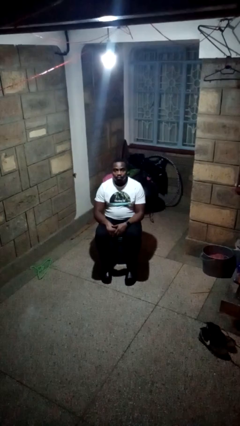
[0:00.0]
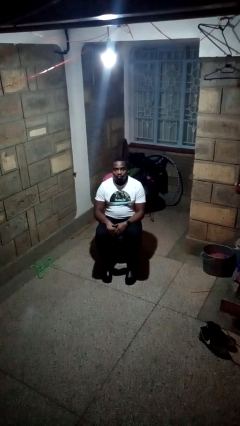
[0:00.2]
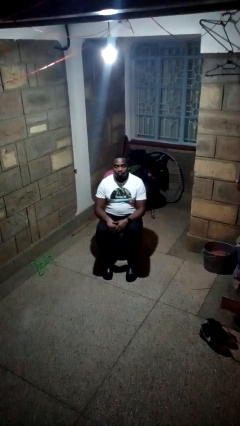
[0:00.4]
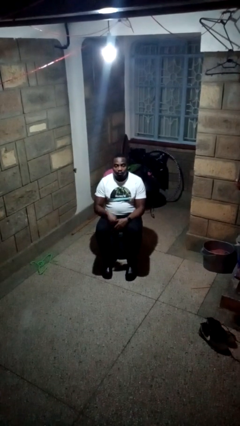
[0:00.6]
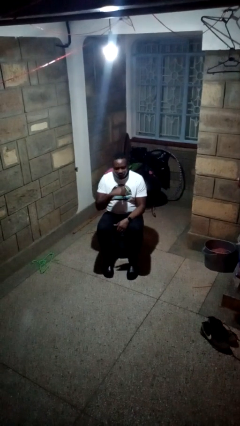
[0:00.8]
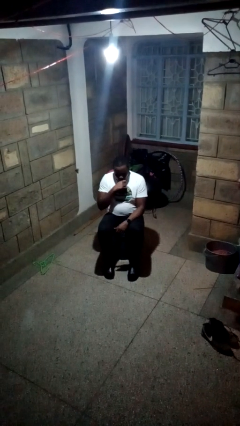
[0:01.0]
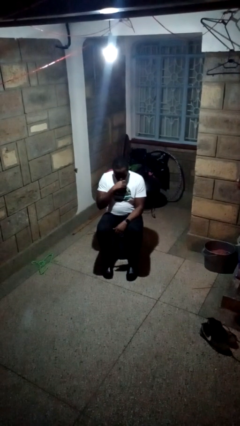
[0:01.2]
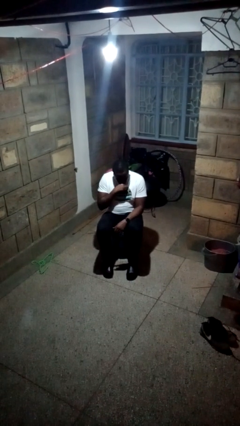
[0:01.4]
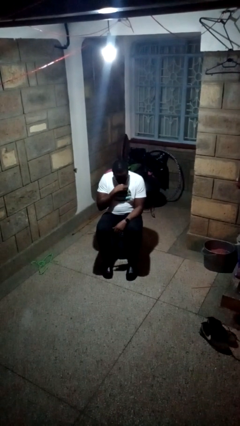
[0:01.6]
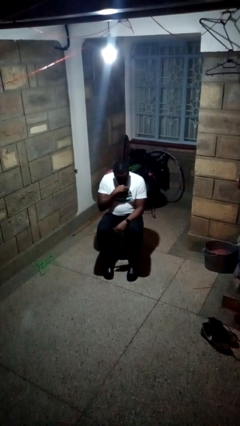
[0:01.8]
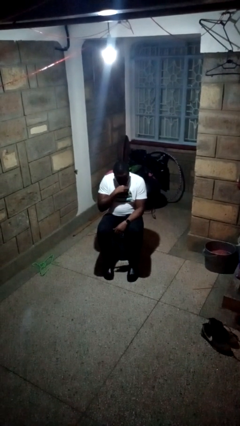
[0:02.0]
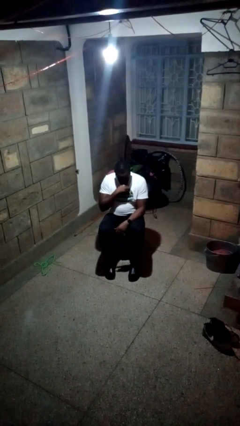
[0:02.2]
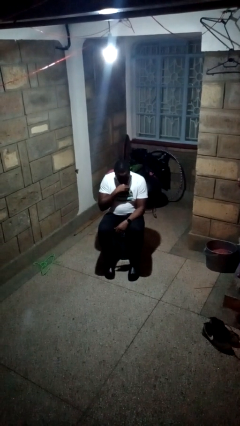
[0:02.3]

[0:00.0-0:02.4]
person sneezes into hand

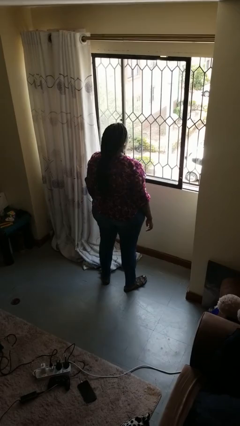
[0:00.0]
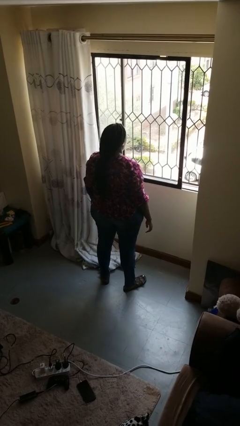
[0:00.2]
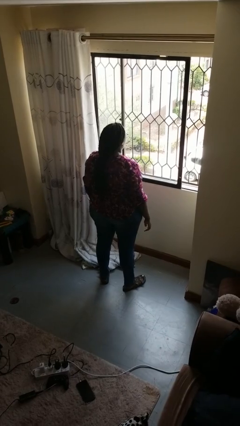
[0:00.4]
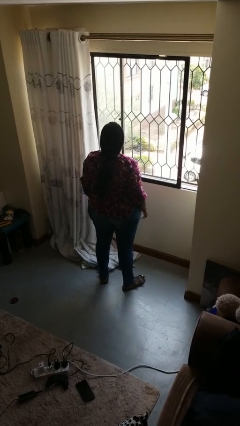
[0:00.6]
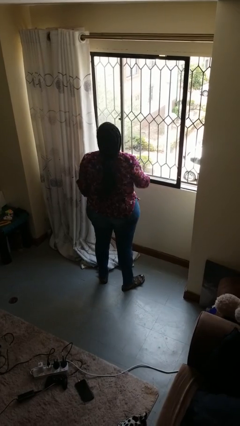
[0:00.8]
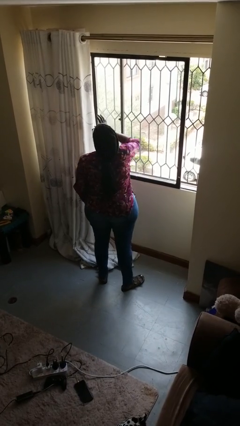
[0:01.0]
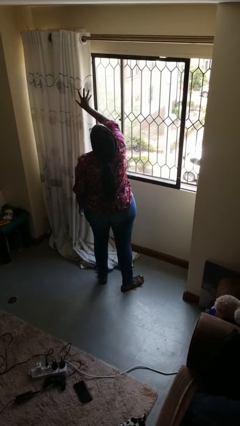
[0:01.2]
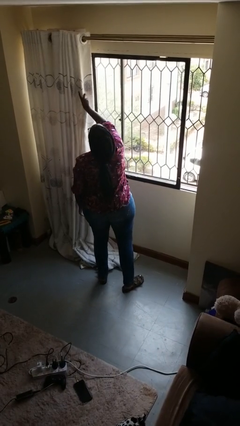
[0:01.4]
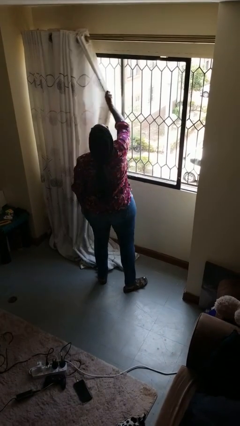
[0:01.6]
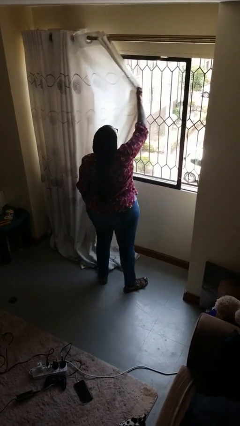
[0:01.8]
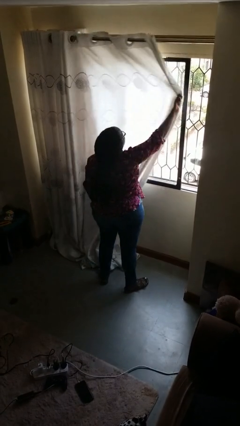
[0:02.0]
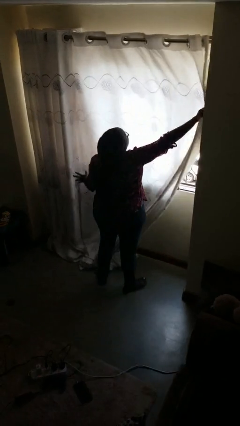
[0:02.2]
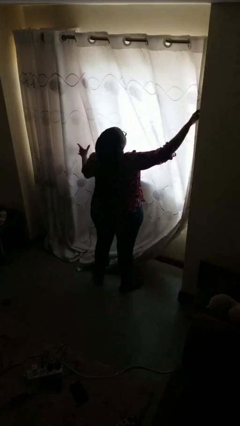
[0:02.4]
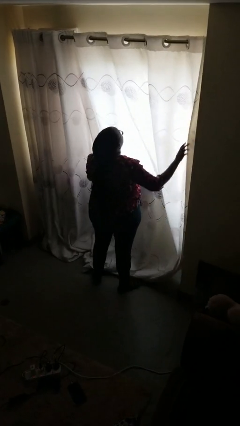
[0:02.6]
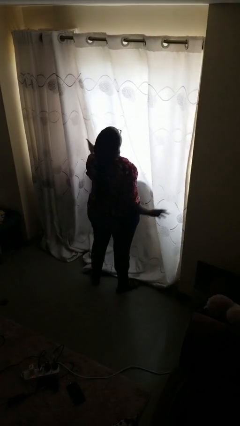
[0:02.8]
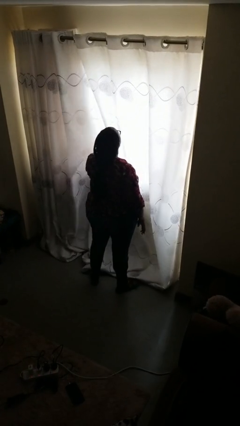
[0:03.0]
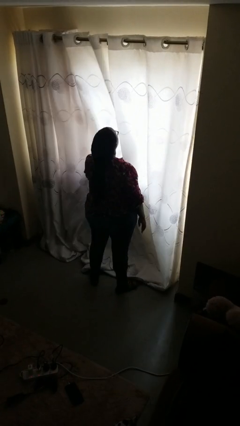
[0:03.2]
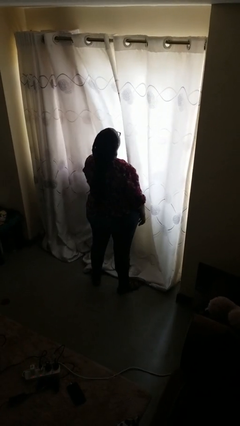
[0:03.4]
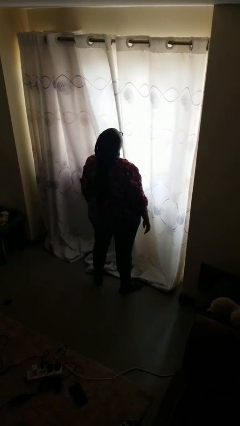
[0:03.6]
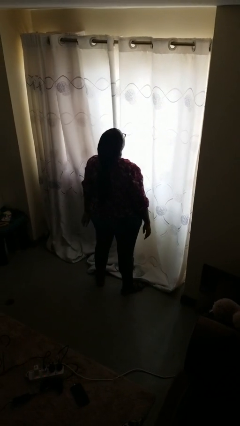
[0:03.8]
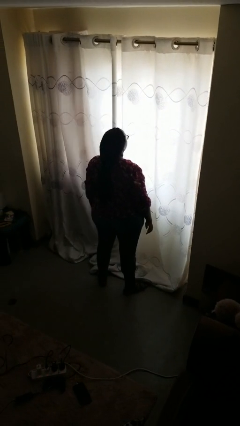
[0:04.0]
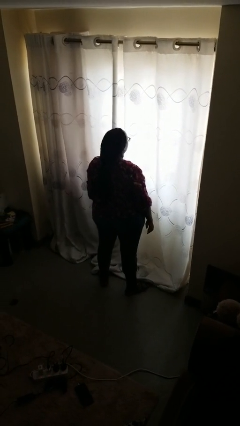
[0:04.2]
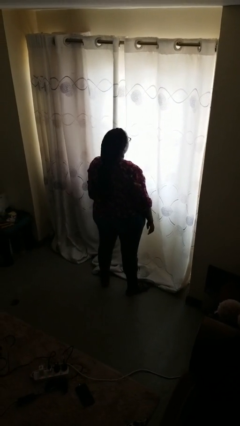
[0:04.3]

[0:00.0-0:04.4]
person closes curtains

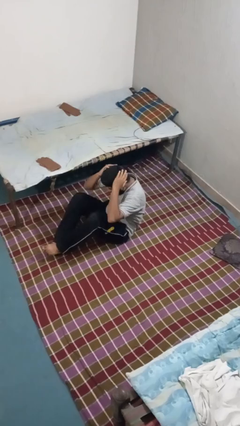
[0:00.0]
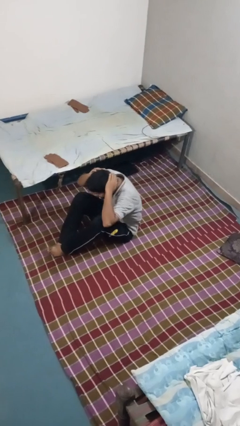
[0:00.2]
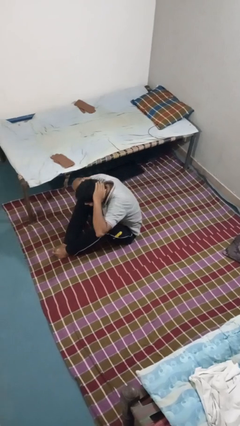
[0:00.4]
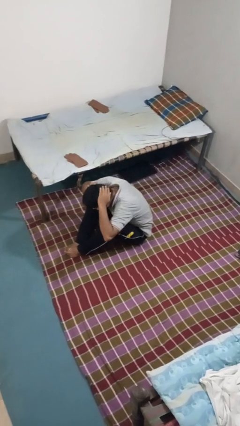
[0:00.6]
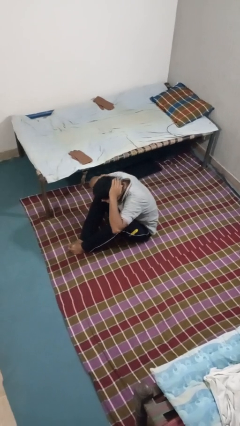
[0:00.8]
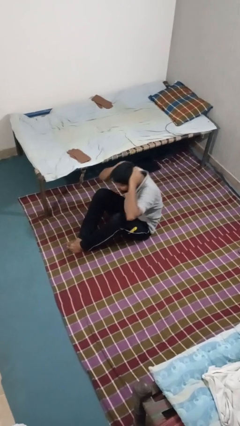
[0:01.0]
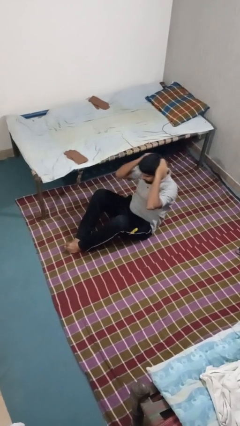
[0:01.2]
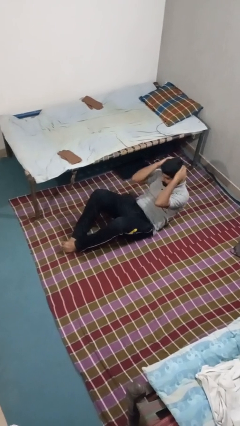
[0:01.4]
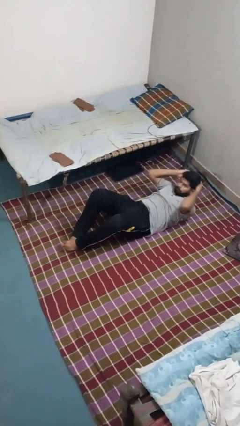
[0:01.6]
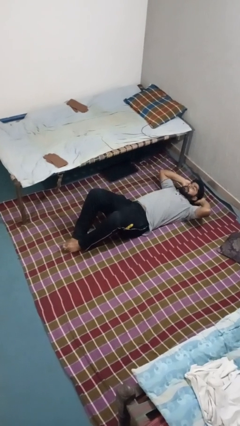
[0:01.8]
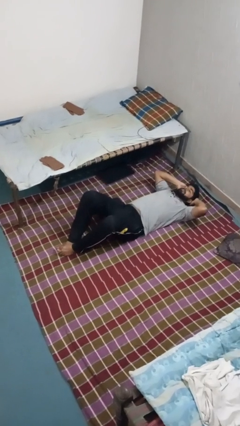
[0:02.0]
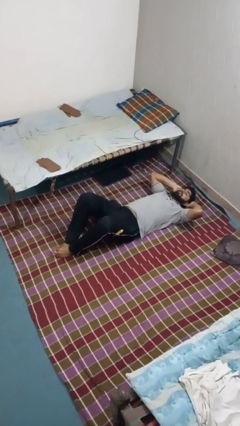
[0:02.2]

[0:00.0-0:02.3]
person exercises with situp

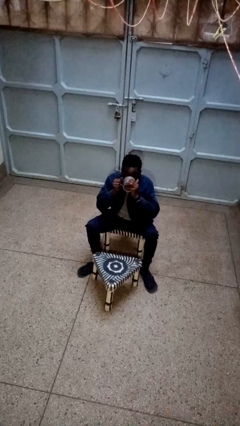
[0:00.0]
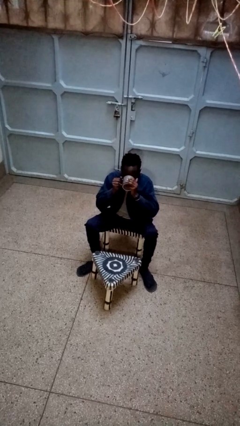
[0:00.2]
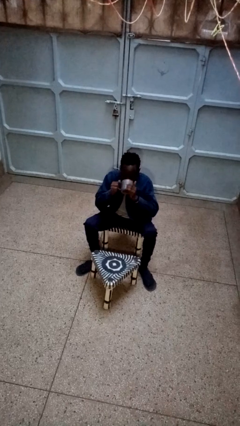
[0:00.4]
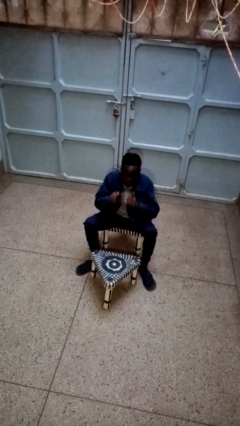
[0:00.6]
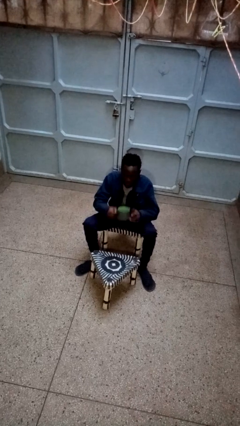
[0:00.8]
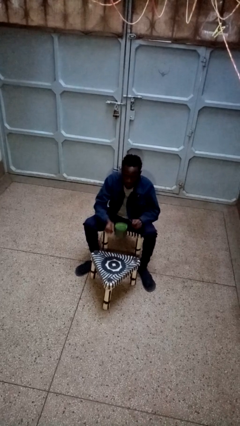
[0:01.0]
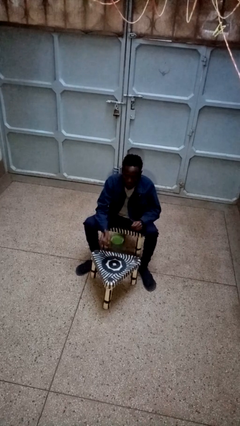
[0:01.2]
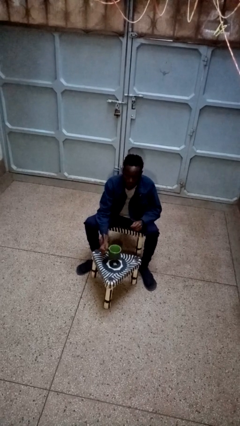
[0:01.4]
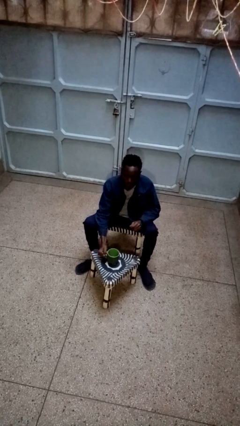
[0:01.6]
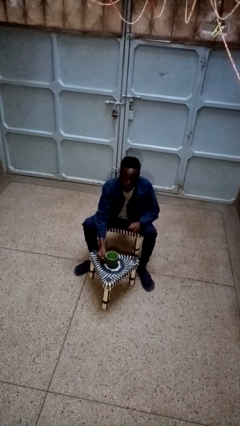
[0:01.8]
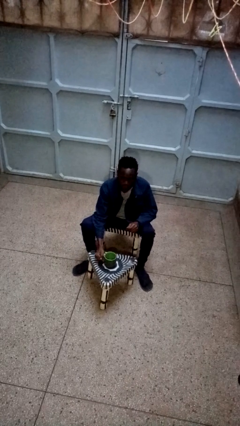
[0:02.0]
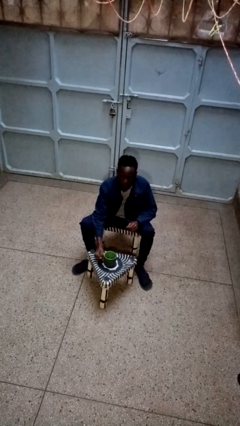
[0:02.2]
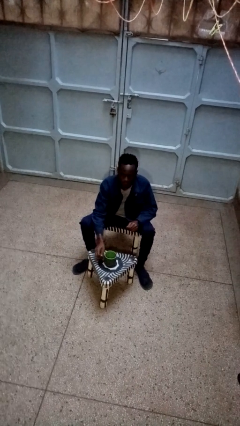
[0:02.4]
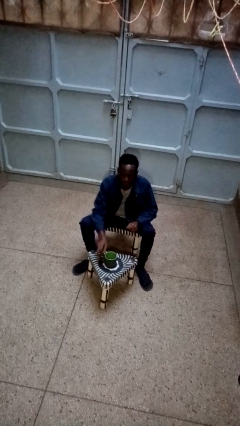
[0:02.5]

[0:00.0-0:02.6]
person puts down object on table

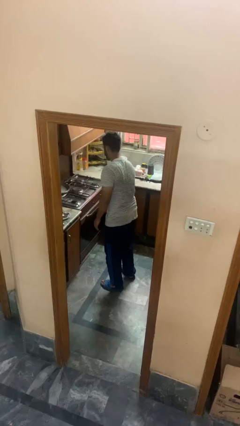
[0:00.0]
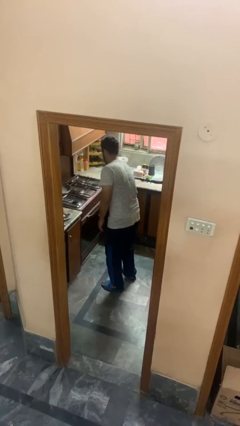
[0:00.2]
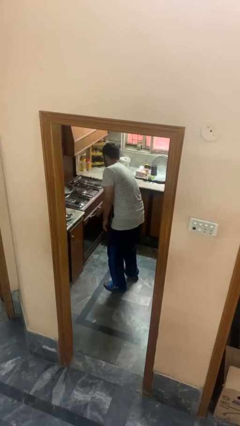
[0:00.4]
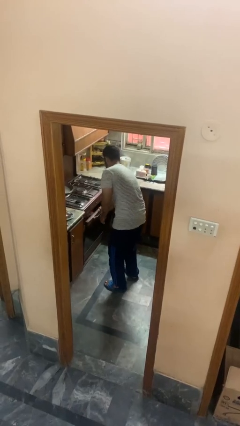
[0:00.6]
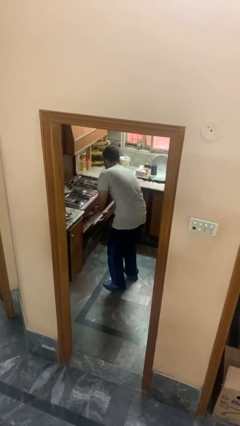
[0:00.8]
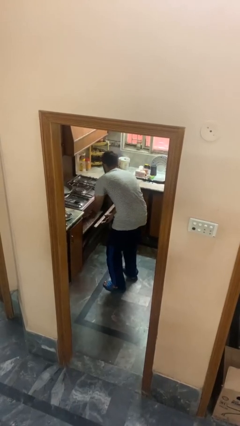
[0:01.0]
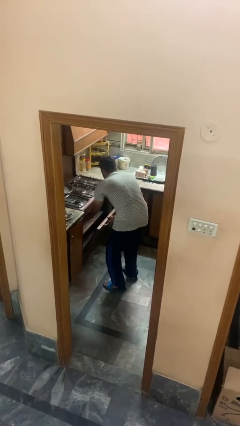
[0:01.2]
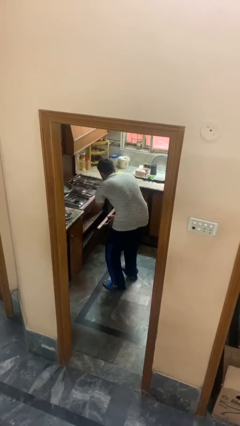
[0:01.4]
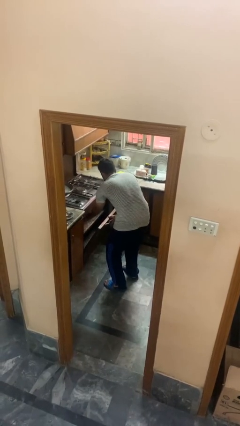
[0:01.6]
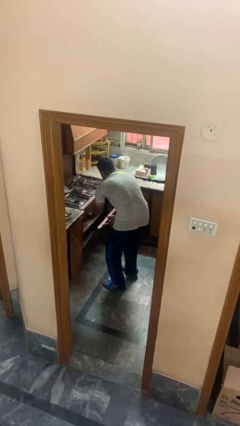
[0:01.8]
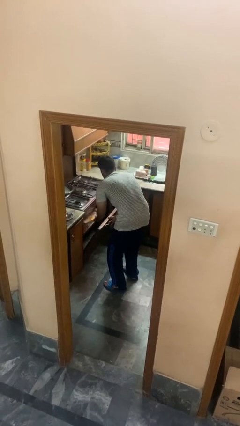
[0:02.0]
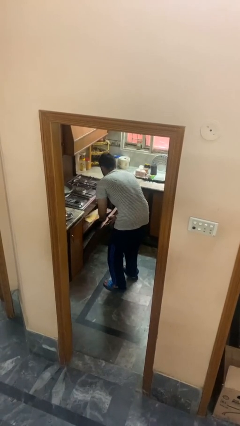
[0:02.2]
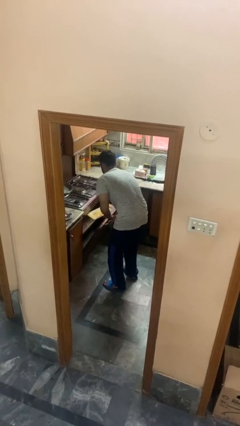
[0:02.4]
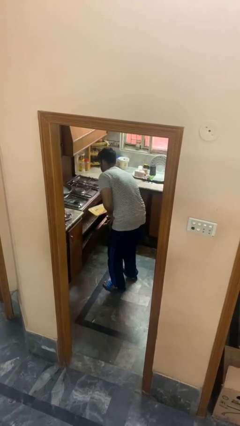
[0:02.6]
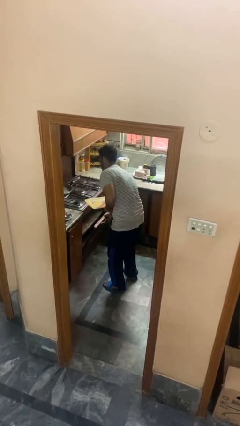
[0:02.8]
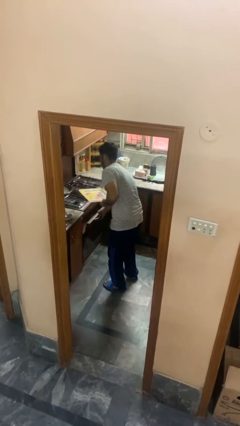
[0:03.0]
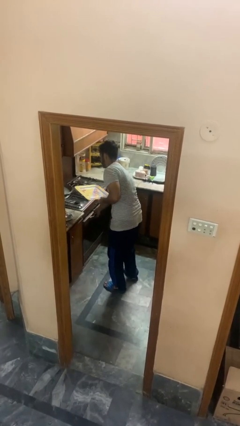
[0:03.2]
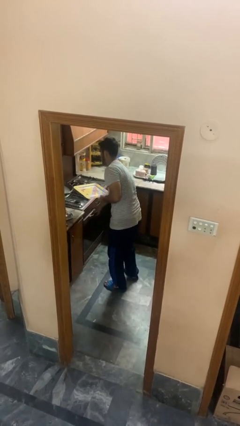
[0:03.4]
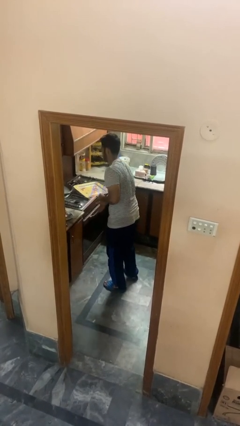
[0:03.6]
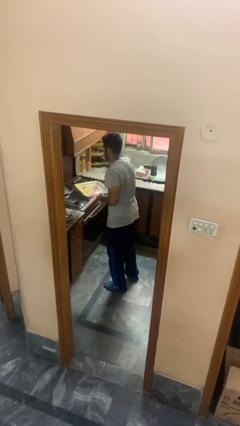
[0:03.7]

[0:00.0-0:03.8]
person takes object from oven

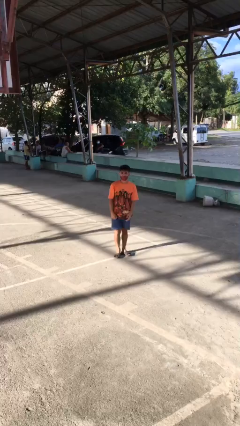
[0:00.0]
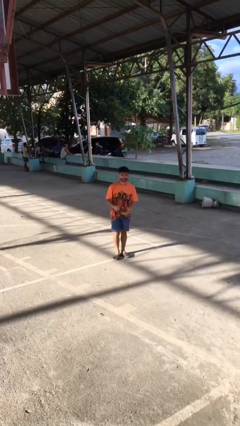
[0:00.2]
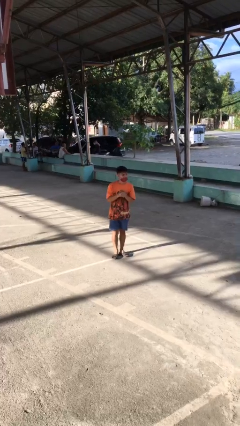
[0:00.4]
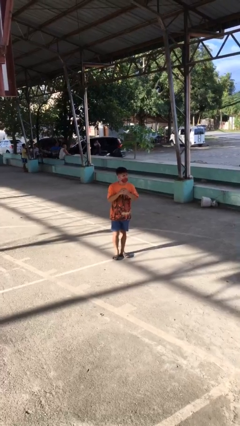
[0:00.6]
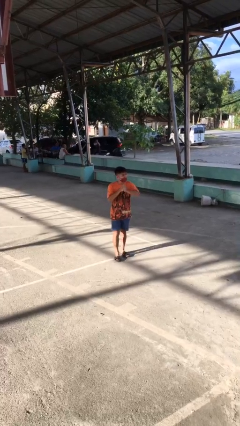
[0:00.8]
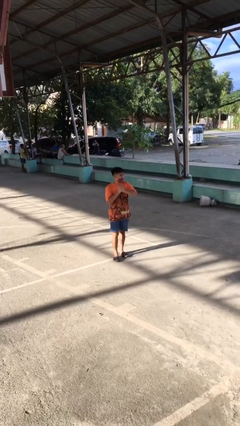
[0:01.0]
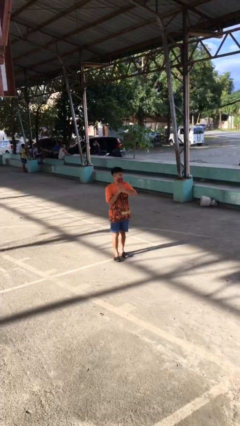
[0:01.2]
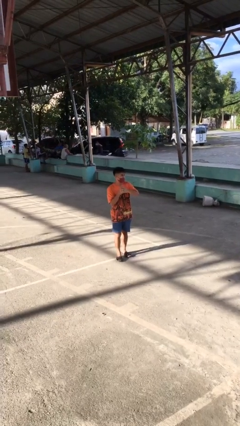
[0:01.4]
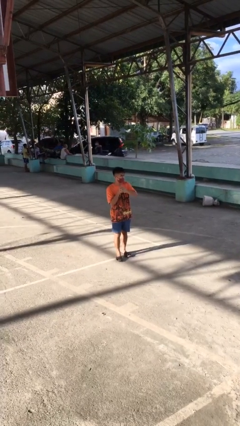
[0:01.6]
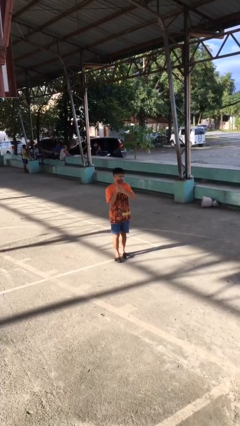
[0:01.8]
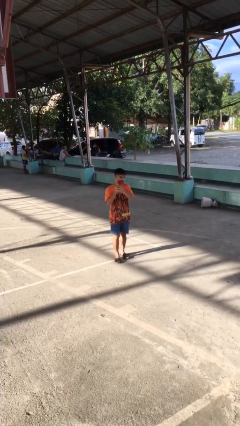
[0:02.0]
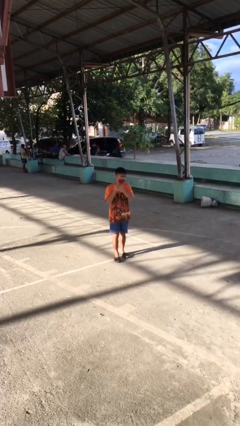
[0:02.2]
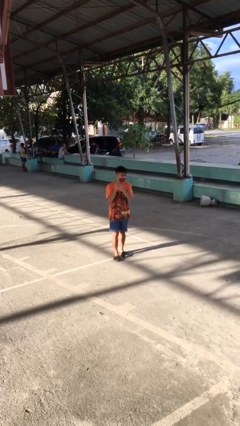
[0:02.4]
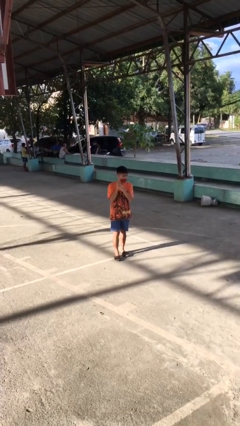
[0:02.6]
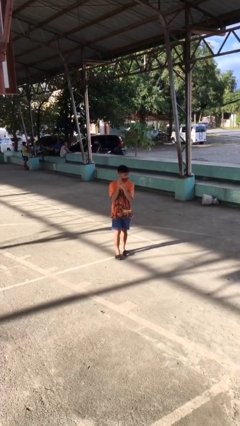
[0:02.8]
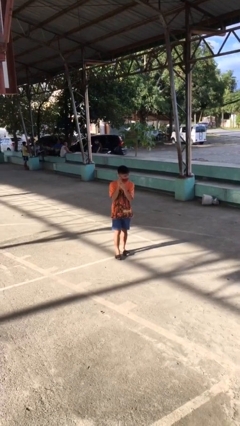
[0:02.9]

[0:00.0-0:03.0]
person cracks knuckles
